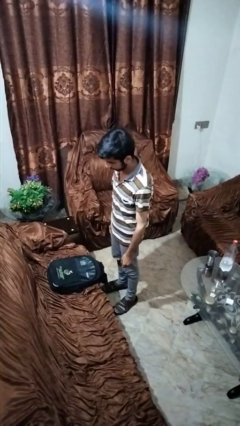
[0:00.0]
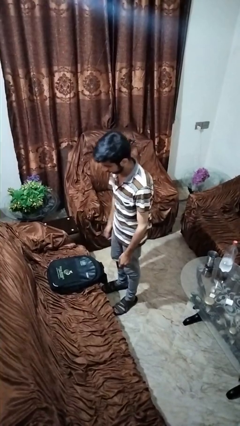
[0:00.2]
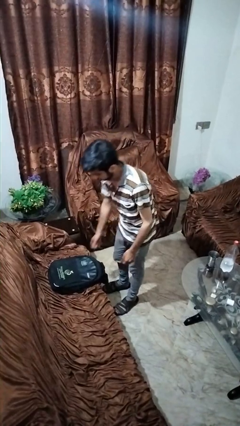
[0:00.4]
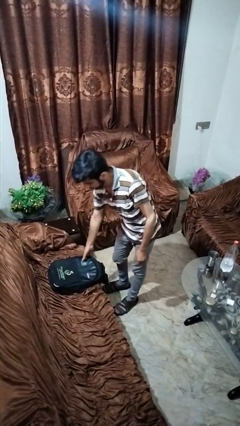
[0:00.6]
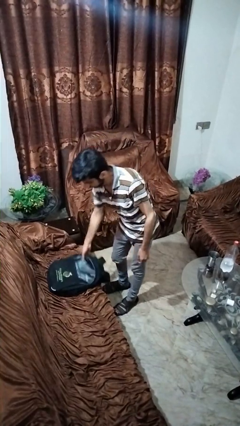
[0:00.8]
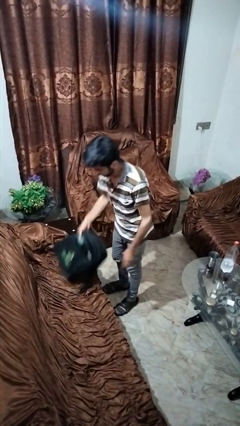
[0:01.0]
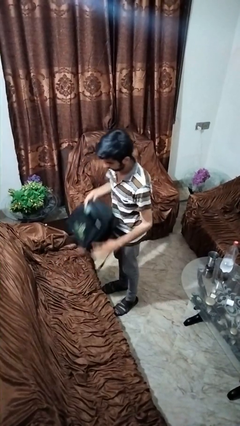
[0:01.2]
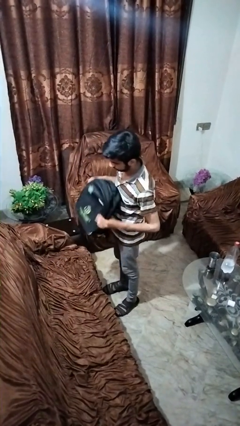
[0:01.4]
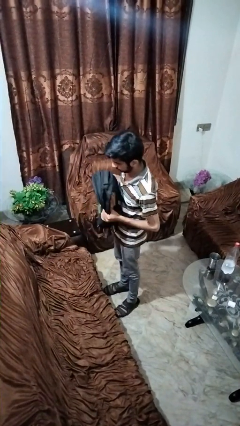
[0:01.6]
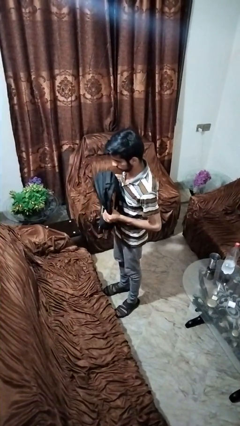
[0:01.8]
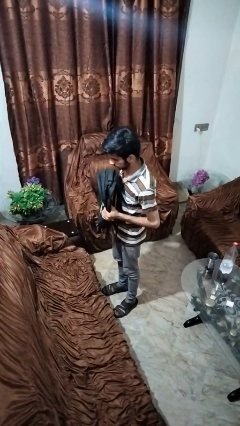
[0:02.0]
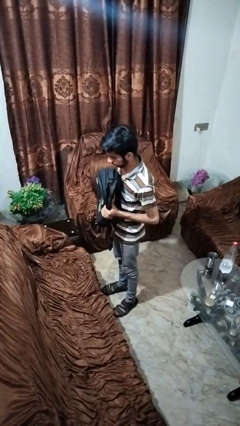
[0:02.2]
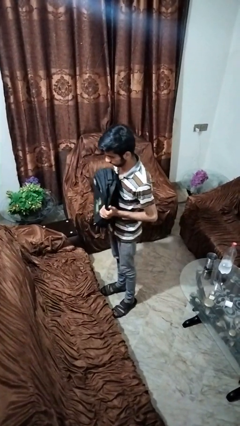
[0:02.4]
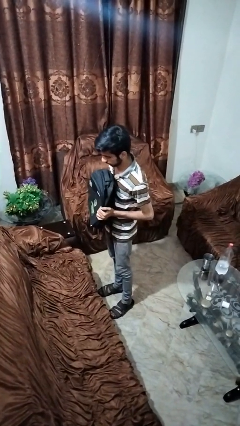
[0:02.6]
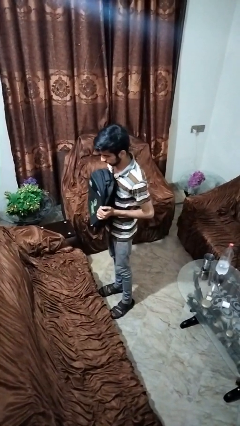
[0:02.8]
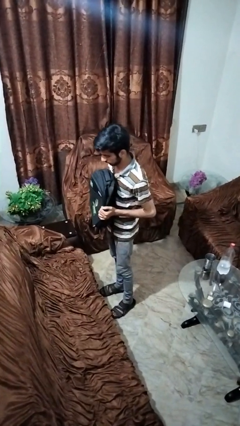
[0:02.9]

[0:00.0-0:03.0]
person picks up object from couch

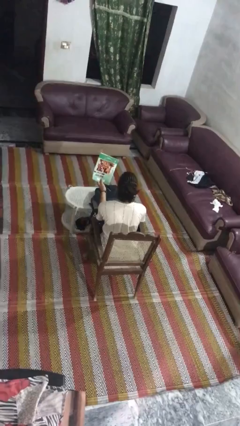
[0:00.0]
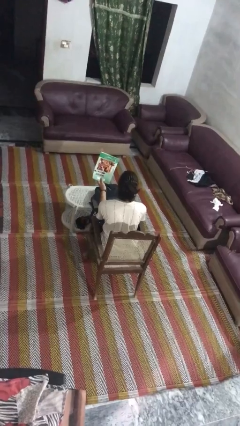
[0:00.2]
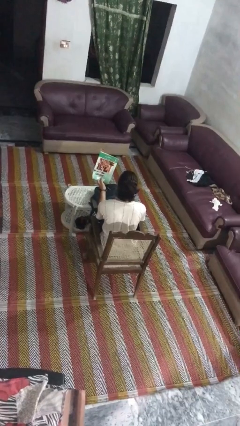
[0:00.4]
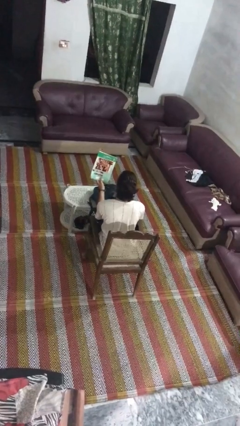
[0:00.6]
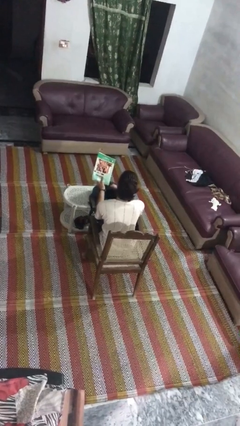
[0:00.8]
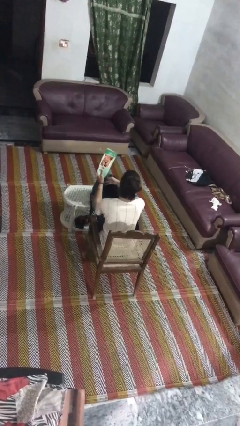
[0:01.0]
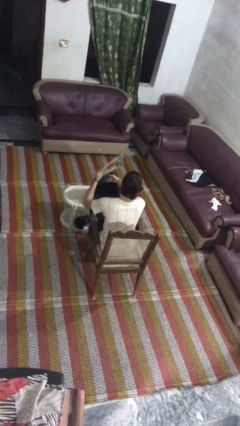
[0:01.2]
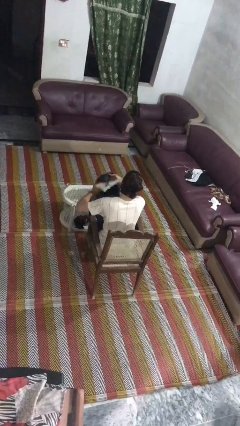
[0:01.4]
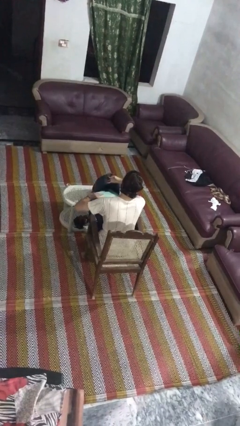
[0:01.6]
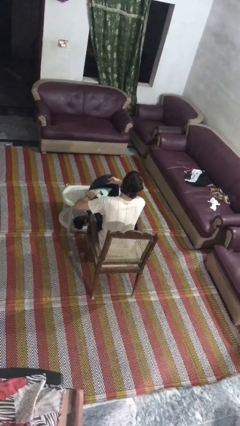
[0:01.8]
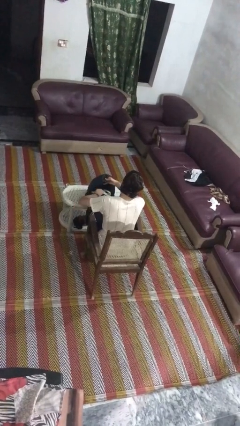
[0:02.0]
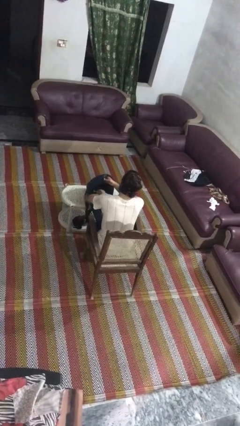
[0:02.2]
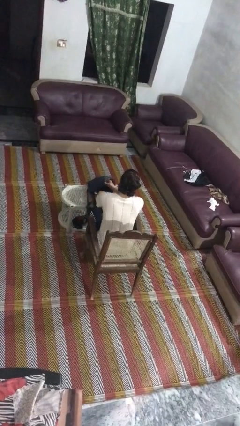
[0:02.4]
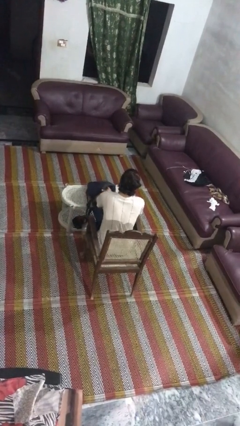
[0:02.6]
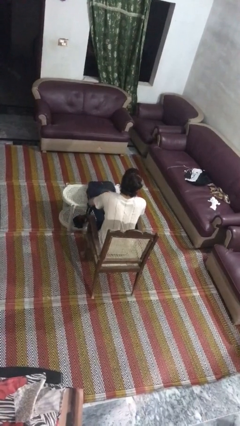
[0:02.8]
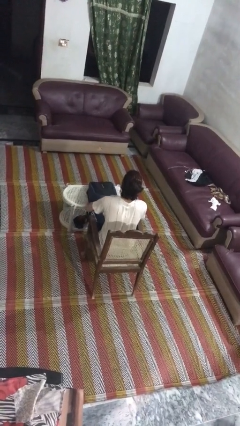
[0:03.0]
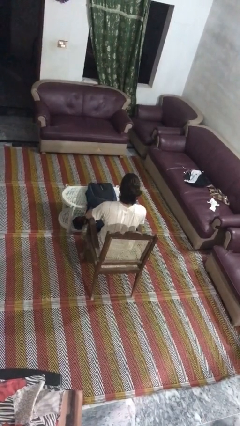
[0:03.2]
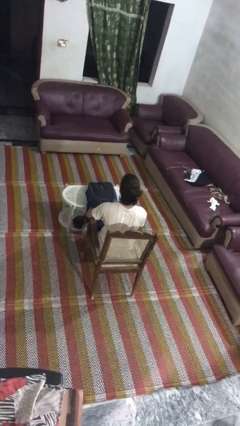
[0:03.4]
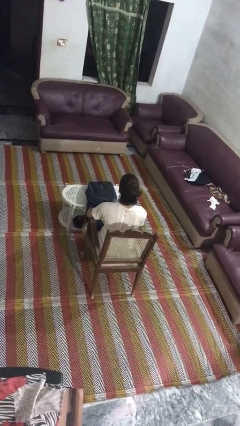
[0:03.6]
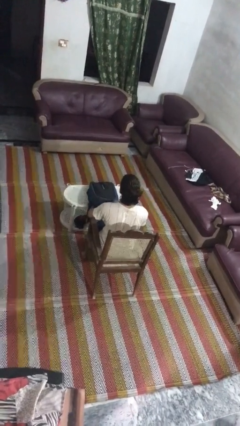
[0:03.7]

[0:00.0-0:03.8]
person puts object into backpack

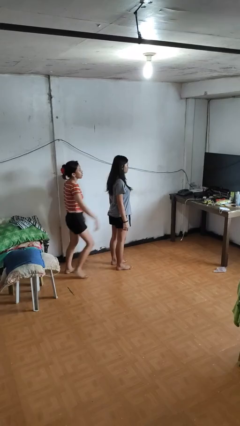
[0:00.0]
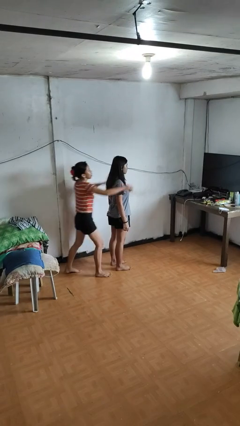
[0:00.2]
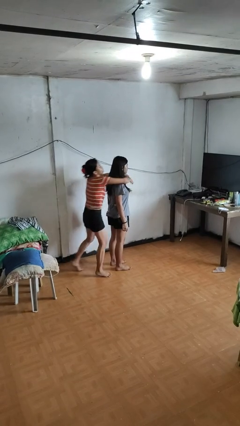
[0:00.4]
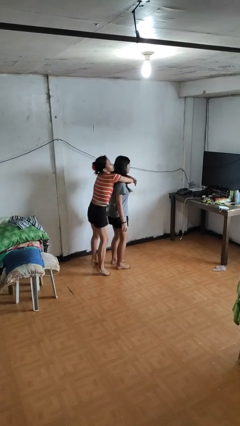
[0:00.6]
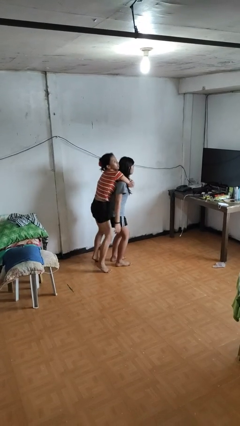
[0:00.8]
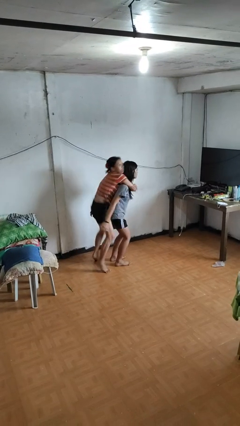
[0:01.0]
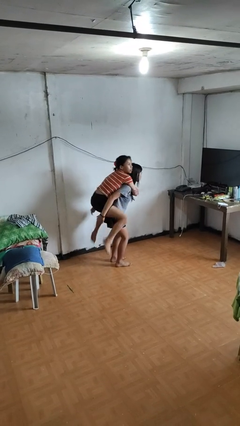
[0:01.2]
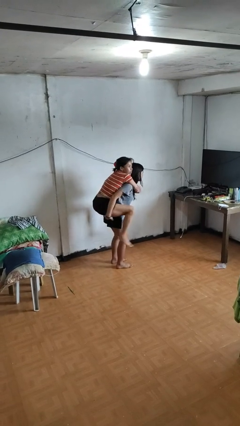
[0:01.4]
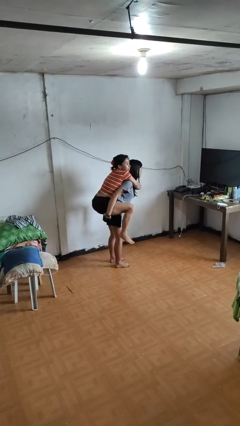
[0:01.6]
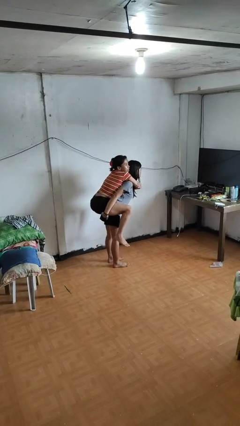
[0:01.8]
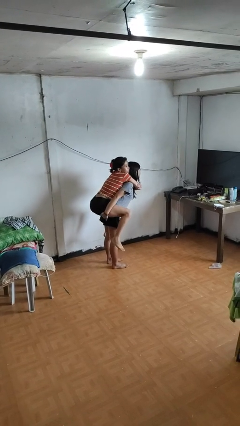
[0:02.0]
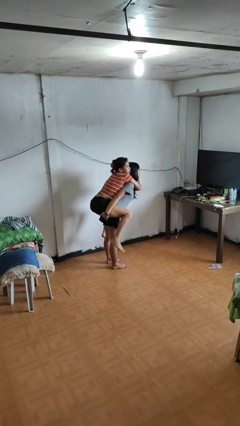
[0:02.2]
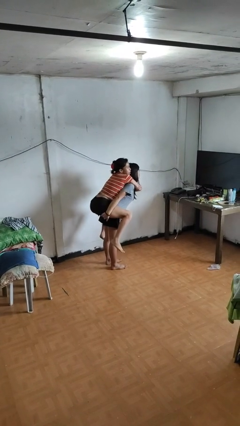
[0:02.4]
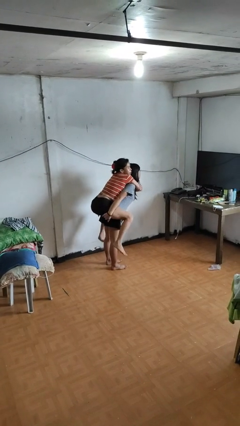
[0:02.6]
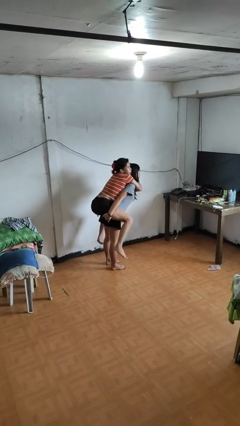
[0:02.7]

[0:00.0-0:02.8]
person carries person over shoulder

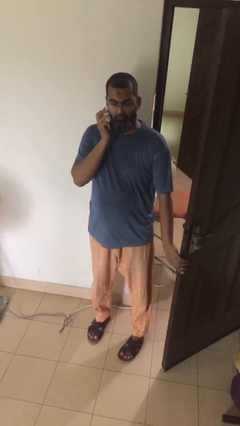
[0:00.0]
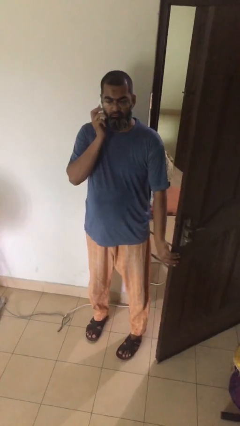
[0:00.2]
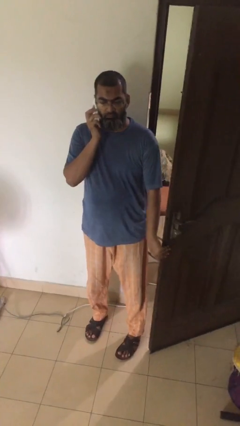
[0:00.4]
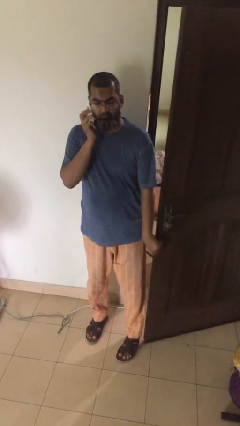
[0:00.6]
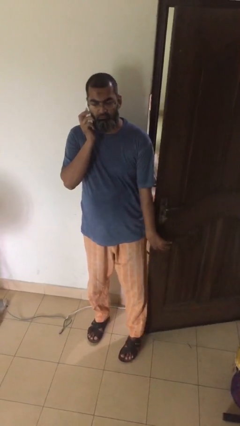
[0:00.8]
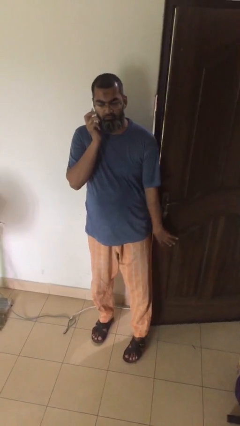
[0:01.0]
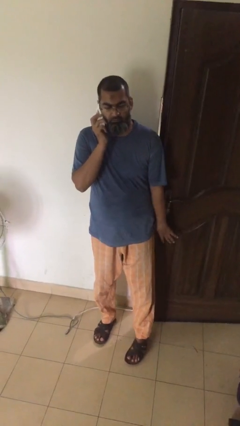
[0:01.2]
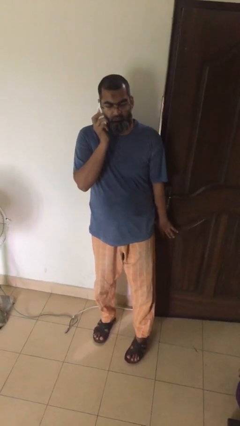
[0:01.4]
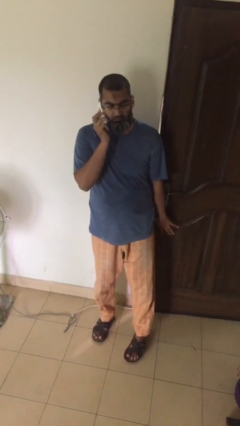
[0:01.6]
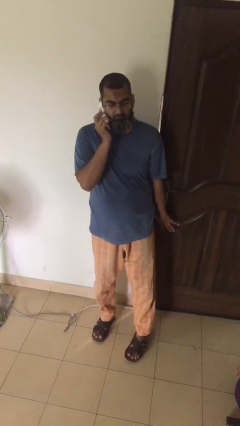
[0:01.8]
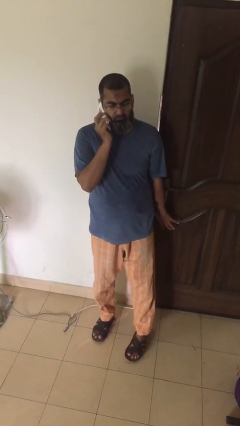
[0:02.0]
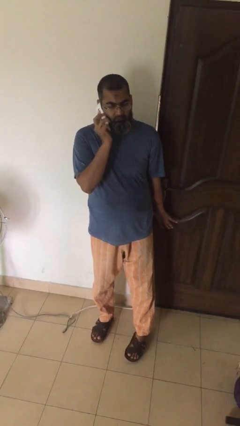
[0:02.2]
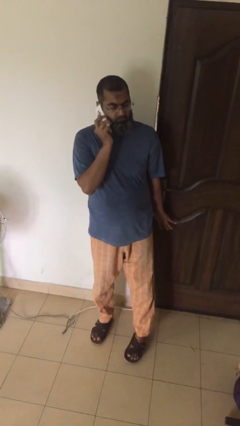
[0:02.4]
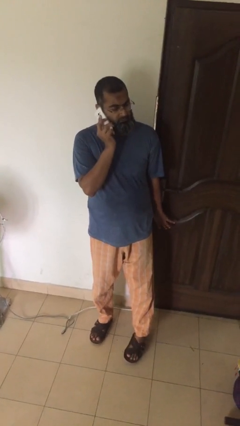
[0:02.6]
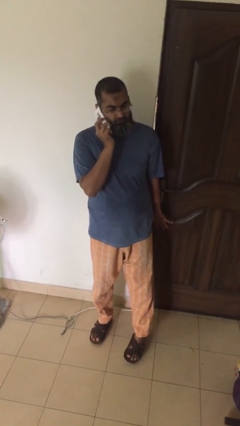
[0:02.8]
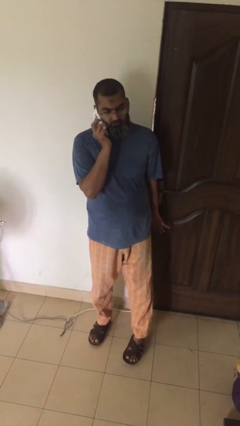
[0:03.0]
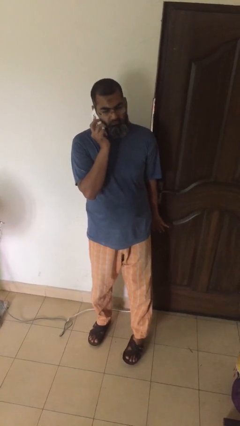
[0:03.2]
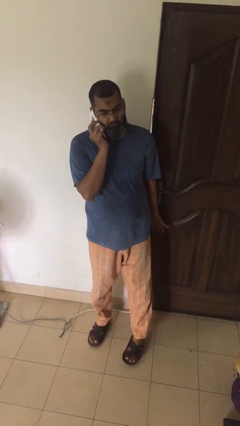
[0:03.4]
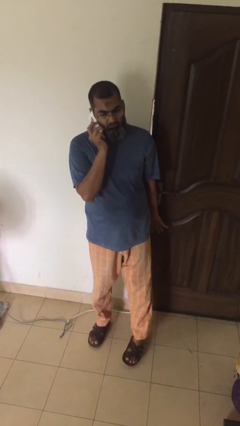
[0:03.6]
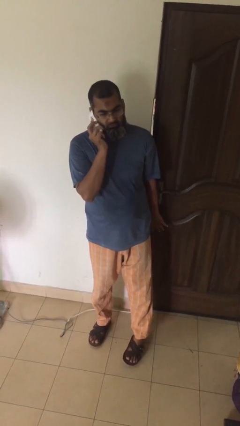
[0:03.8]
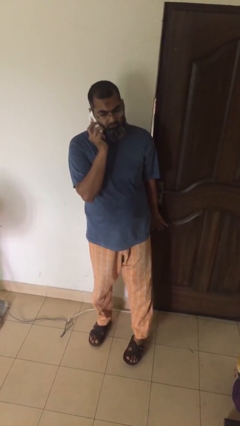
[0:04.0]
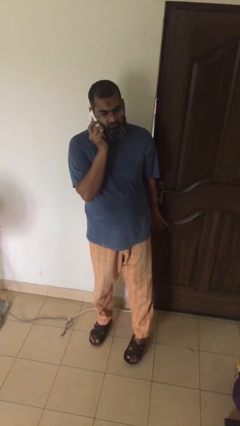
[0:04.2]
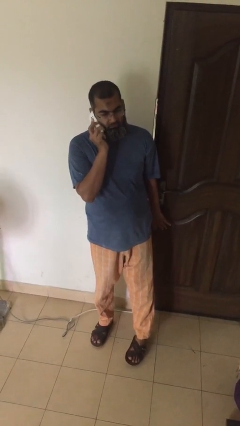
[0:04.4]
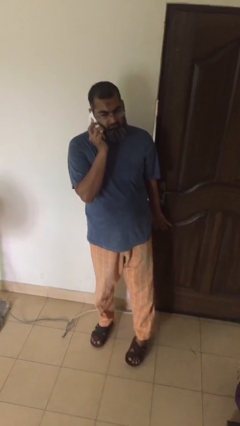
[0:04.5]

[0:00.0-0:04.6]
person closes facility door

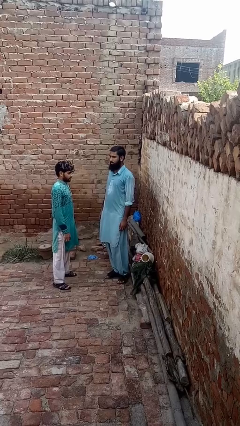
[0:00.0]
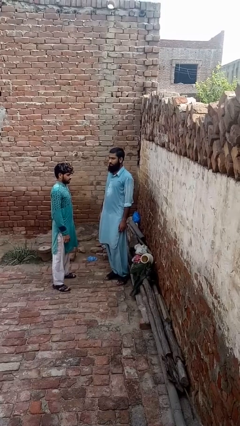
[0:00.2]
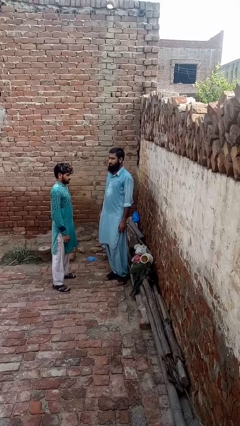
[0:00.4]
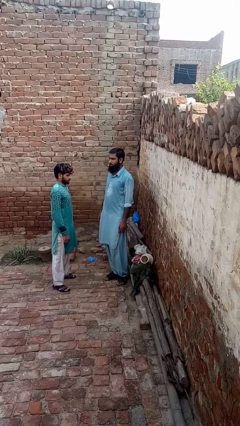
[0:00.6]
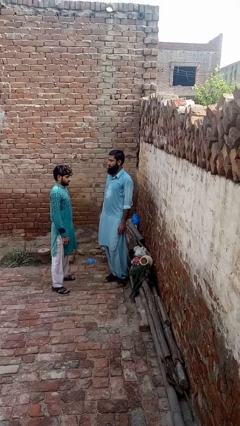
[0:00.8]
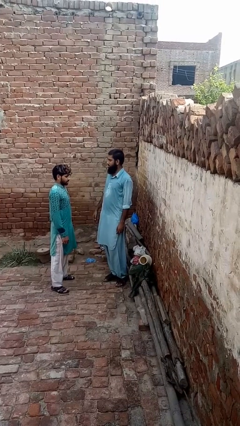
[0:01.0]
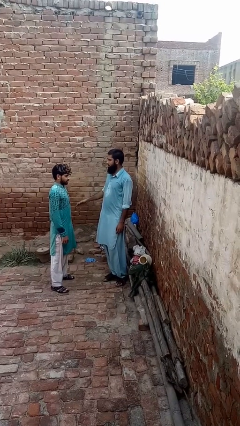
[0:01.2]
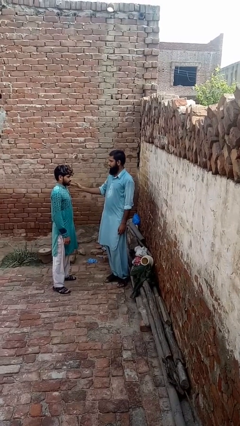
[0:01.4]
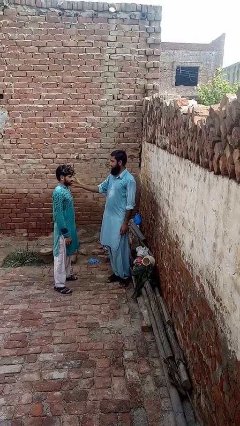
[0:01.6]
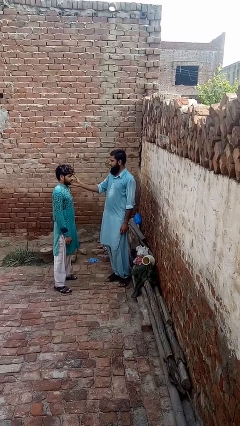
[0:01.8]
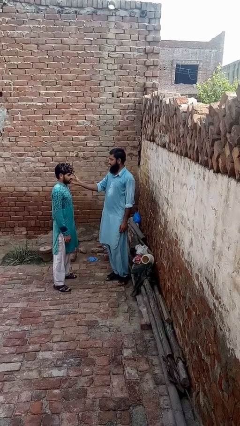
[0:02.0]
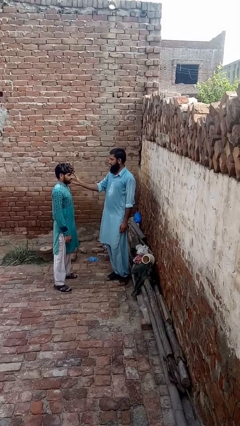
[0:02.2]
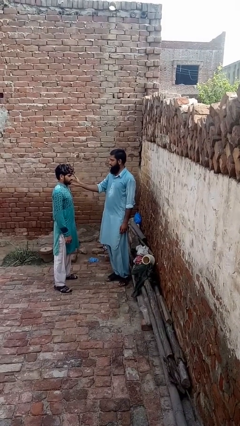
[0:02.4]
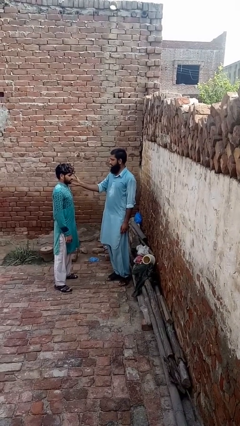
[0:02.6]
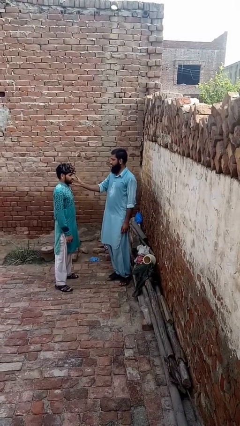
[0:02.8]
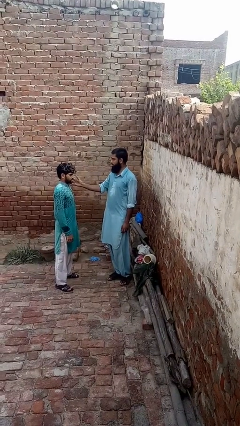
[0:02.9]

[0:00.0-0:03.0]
person touches face of person

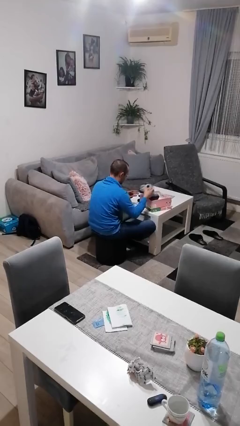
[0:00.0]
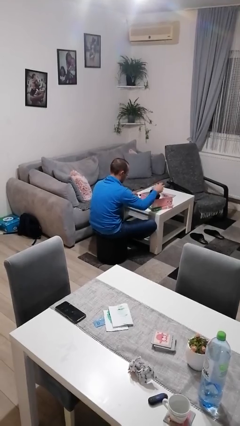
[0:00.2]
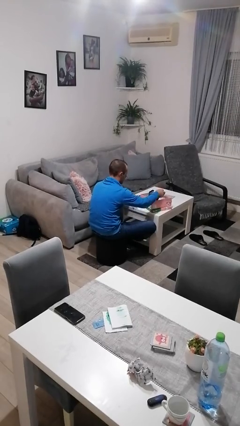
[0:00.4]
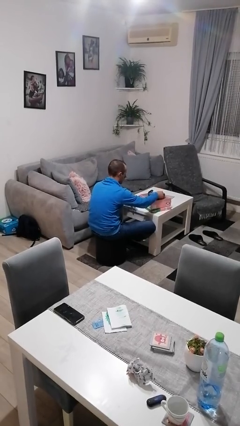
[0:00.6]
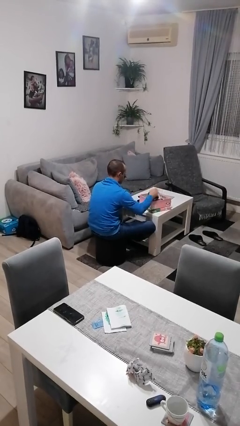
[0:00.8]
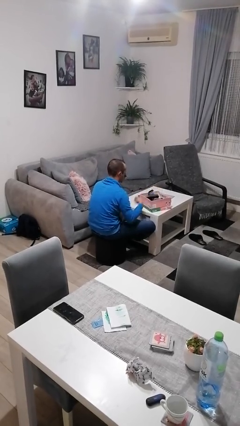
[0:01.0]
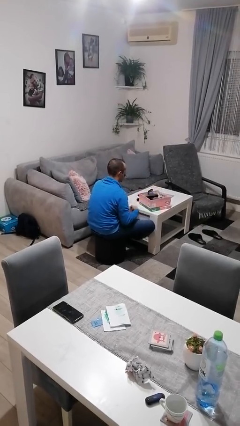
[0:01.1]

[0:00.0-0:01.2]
person puts object into box
